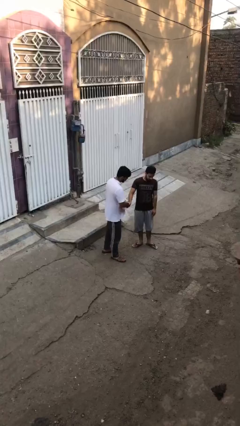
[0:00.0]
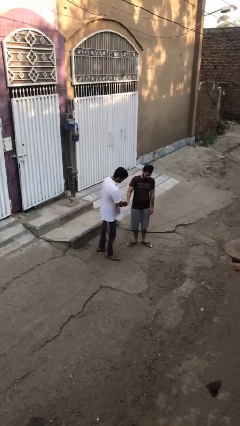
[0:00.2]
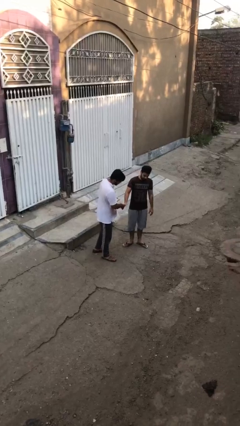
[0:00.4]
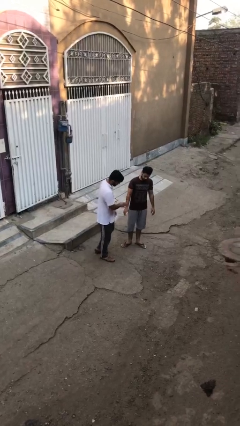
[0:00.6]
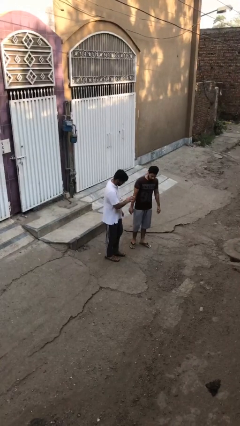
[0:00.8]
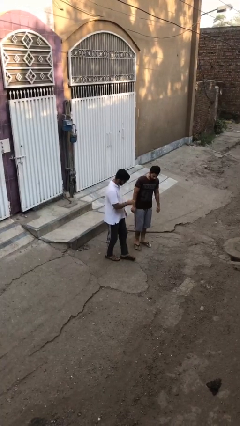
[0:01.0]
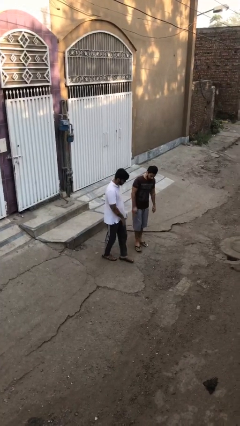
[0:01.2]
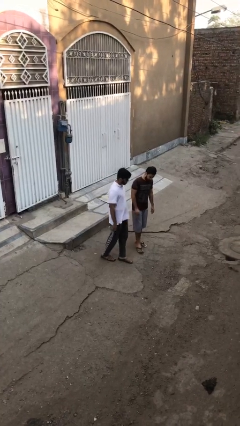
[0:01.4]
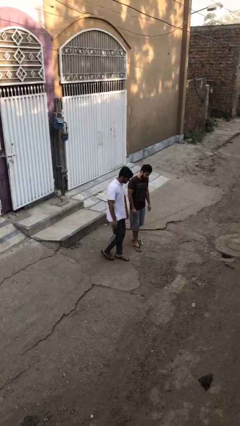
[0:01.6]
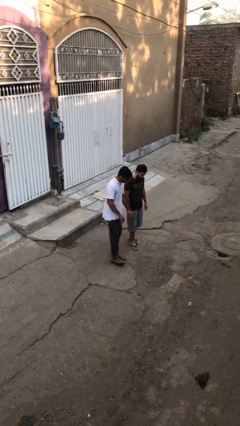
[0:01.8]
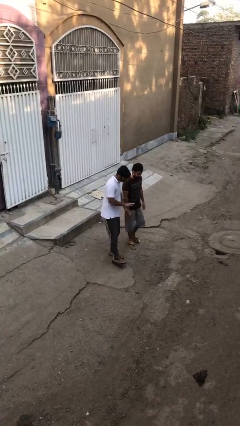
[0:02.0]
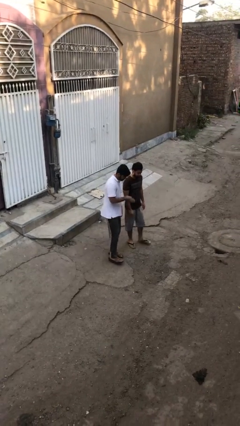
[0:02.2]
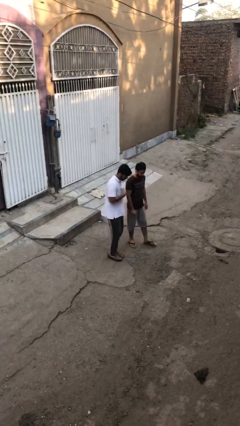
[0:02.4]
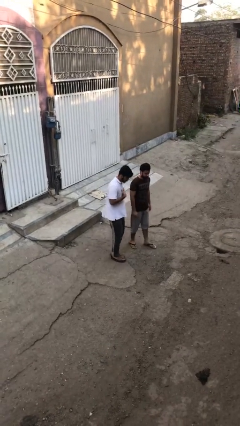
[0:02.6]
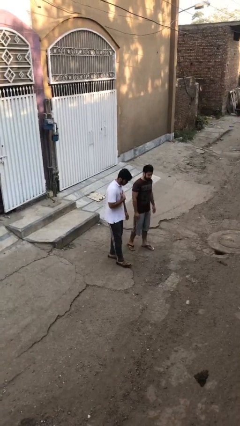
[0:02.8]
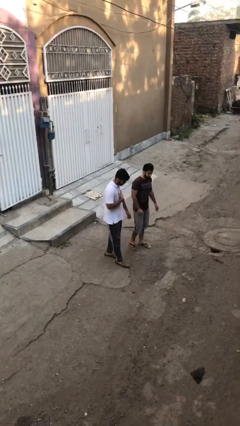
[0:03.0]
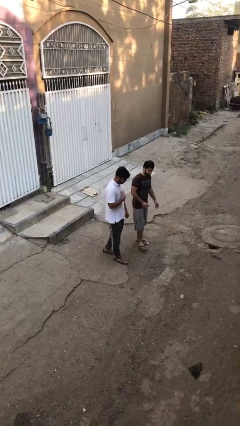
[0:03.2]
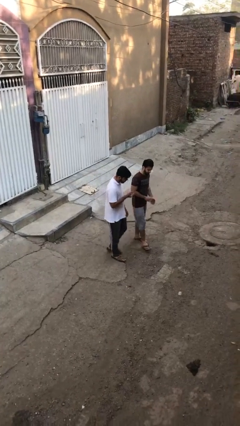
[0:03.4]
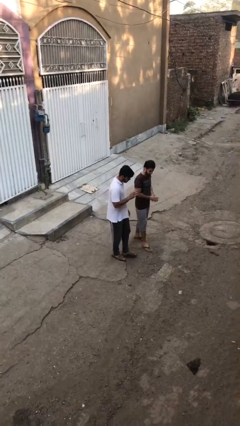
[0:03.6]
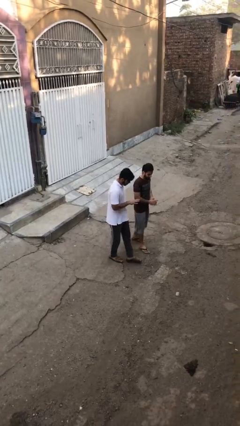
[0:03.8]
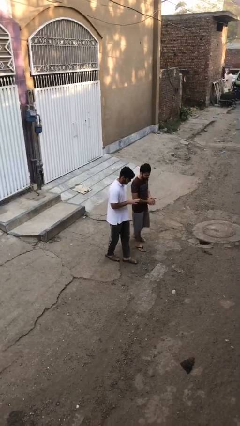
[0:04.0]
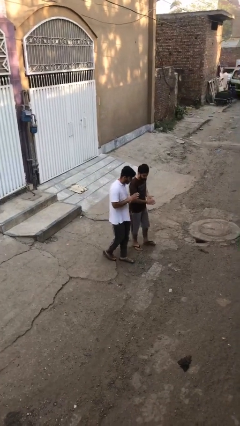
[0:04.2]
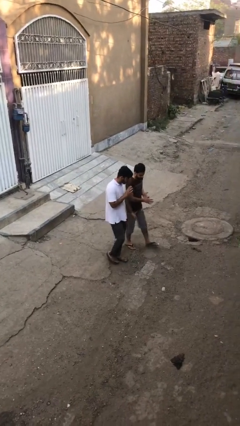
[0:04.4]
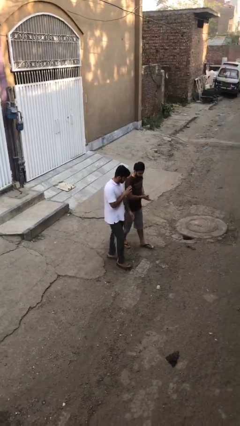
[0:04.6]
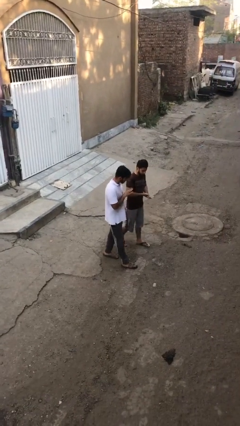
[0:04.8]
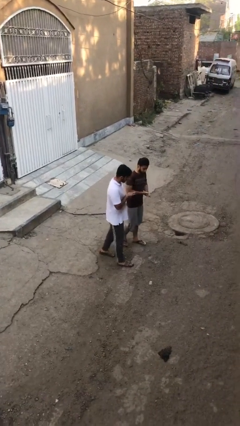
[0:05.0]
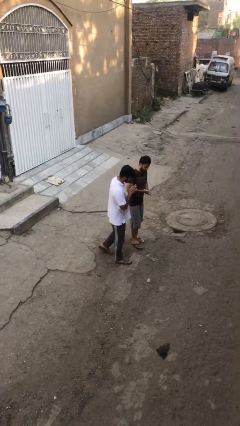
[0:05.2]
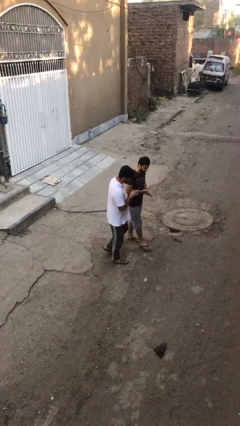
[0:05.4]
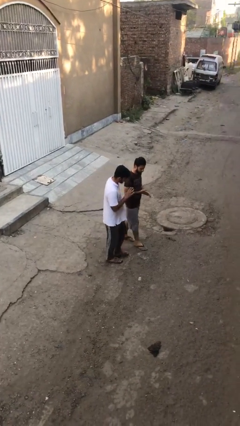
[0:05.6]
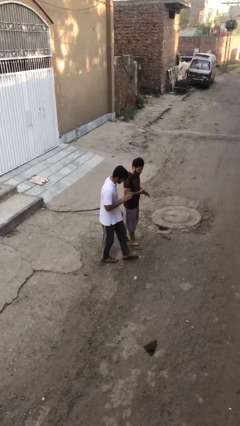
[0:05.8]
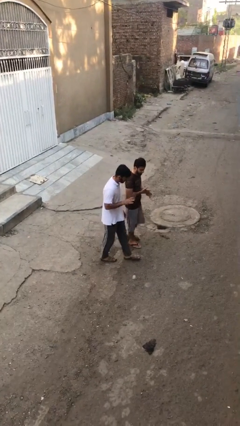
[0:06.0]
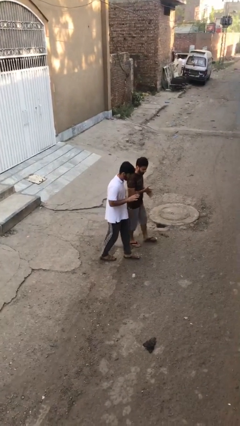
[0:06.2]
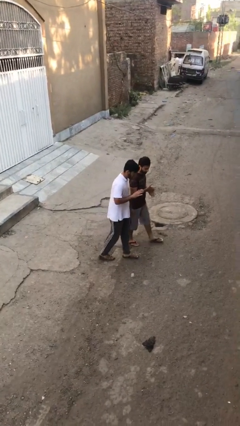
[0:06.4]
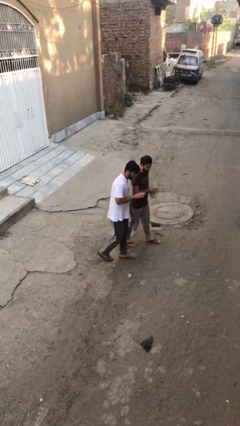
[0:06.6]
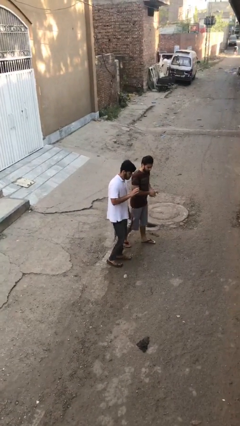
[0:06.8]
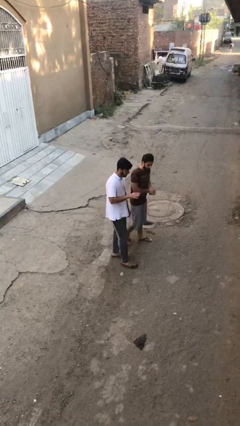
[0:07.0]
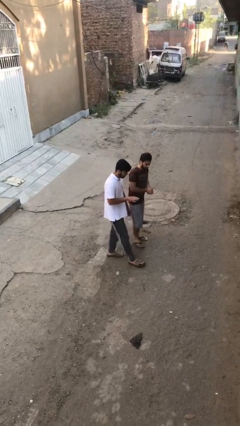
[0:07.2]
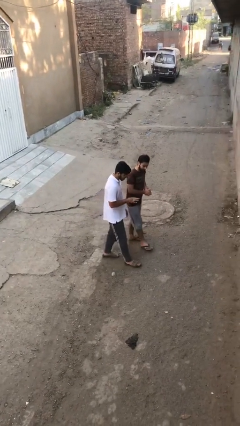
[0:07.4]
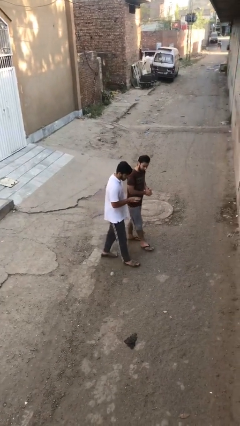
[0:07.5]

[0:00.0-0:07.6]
person talks to person

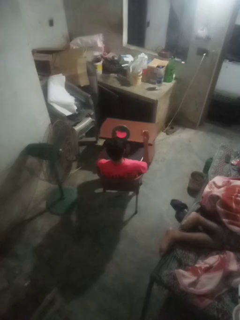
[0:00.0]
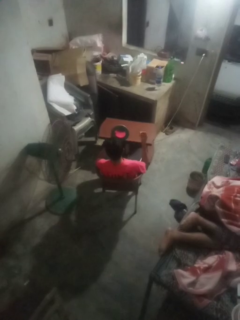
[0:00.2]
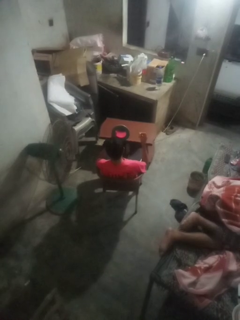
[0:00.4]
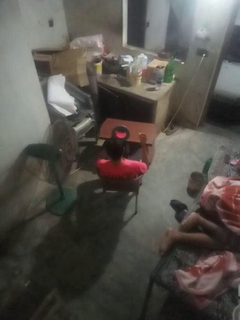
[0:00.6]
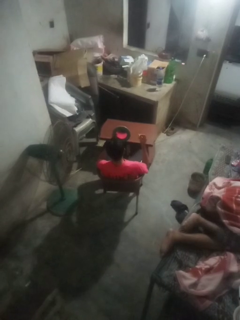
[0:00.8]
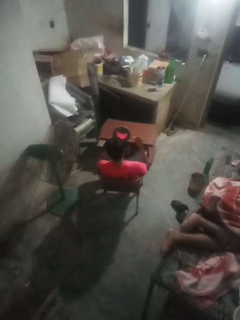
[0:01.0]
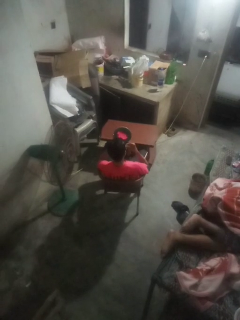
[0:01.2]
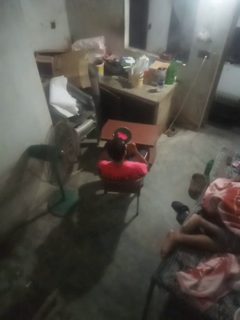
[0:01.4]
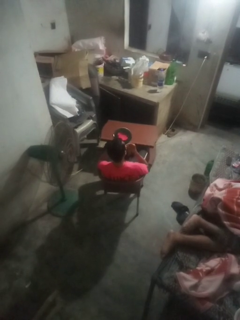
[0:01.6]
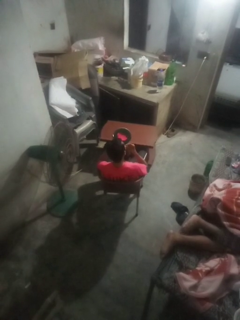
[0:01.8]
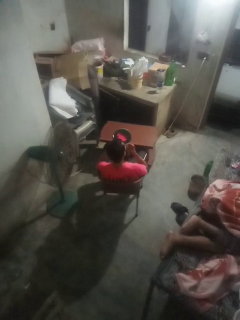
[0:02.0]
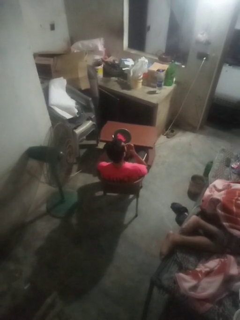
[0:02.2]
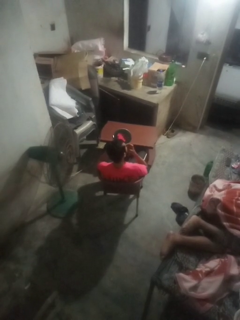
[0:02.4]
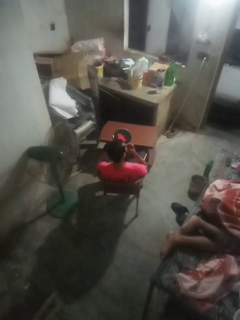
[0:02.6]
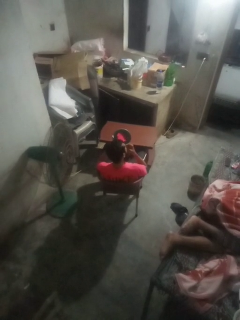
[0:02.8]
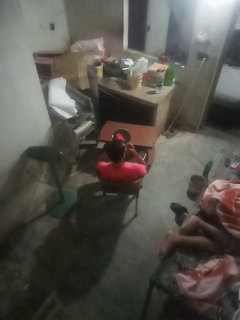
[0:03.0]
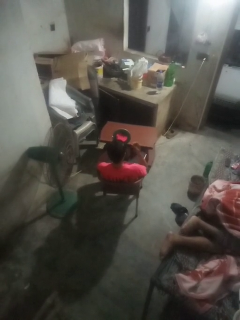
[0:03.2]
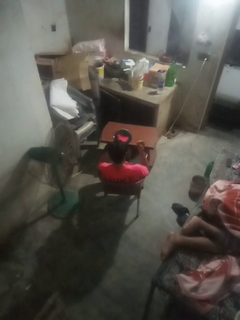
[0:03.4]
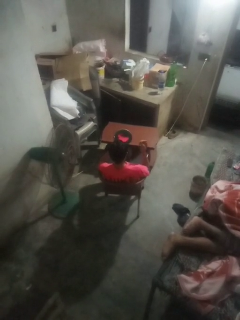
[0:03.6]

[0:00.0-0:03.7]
person applies lip makeup

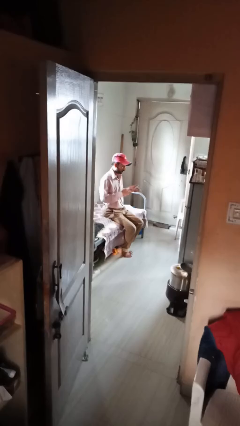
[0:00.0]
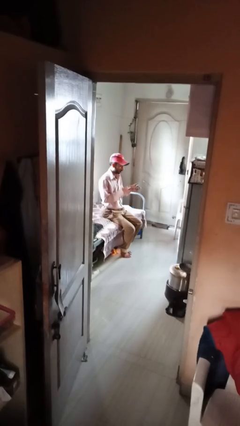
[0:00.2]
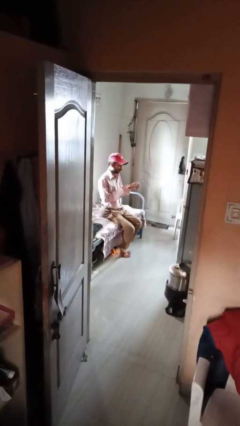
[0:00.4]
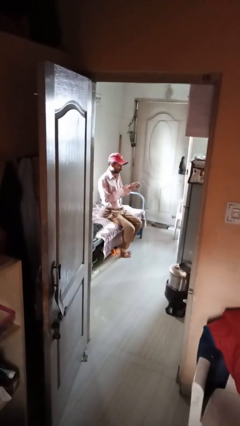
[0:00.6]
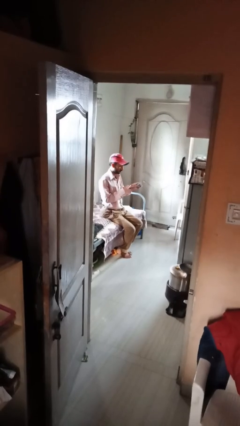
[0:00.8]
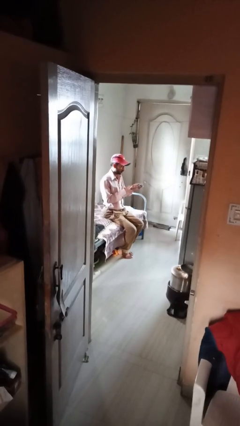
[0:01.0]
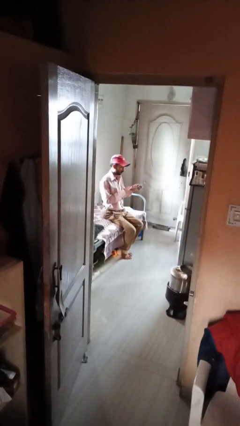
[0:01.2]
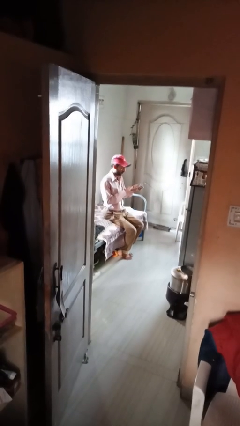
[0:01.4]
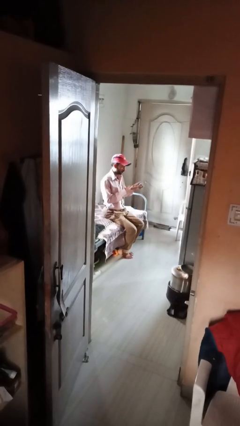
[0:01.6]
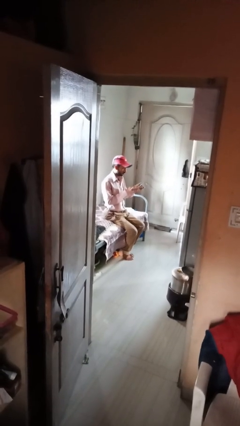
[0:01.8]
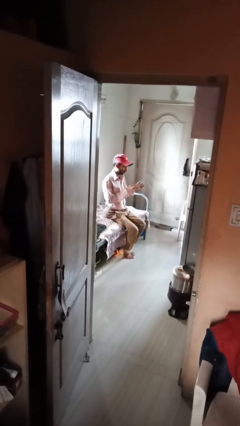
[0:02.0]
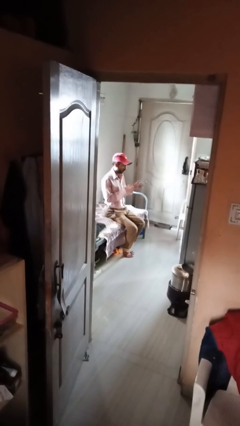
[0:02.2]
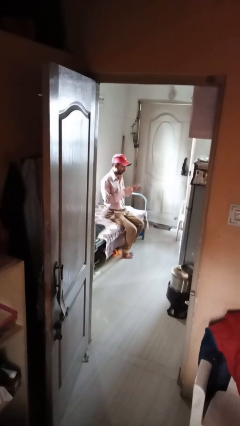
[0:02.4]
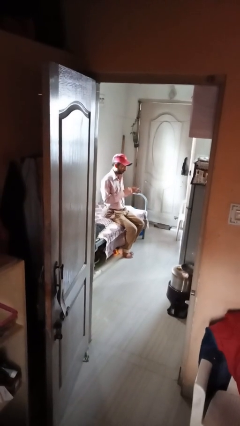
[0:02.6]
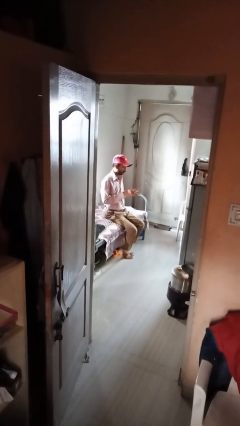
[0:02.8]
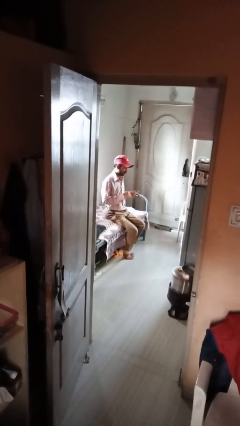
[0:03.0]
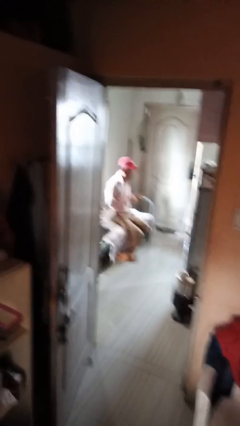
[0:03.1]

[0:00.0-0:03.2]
person clips fingernails

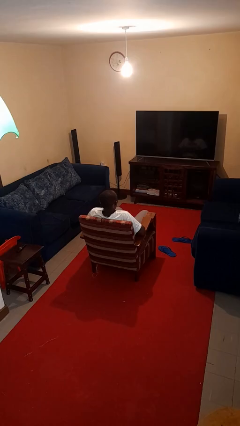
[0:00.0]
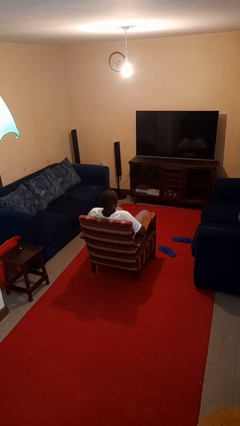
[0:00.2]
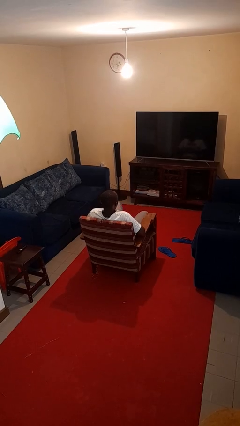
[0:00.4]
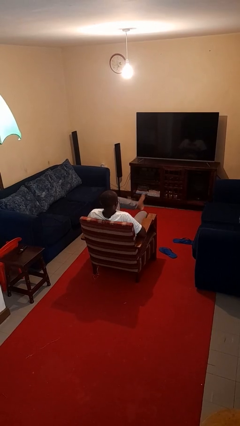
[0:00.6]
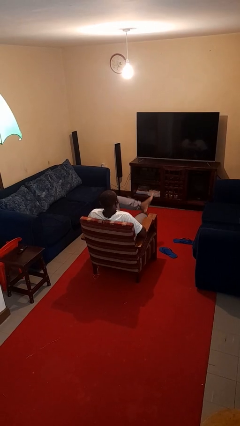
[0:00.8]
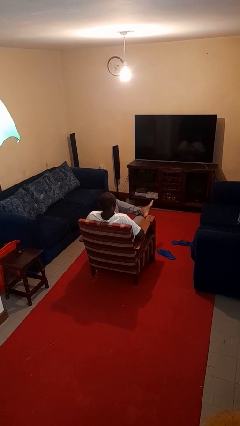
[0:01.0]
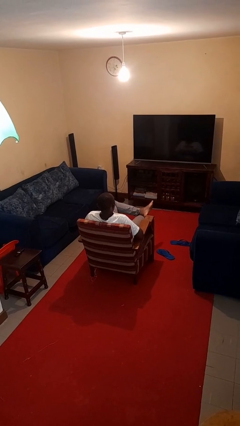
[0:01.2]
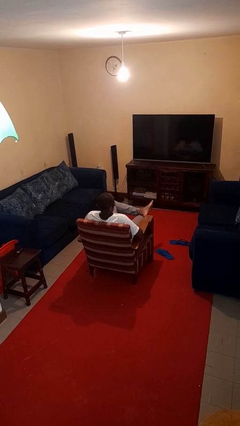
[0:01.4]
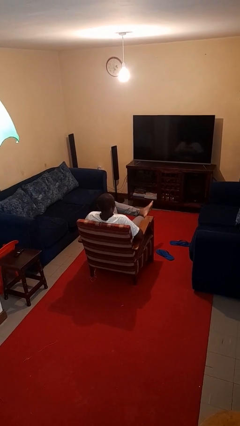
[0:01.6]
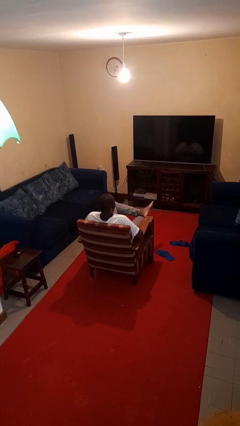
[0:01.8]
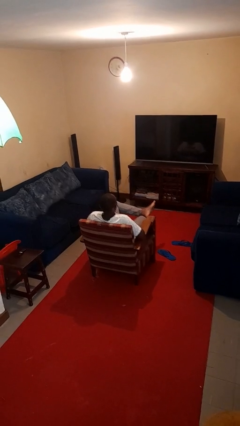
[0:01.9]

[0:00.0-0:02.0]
person crosses legs

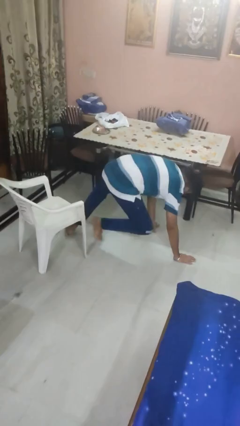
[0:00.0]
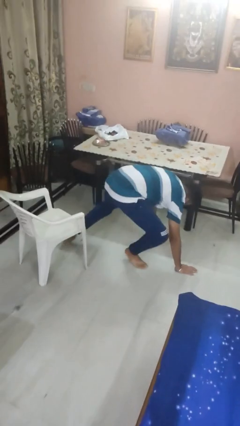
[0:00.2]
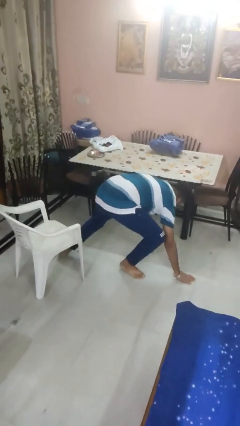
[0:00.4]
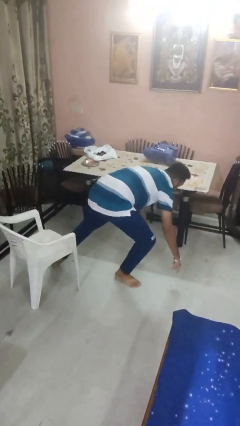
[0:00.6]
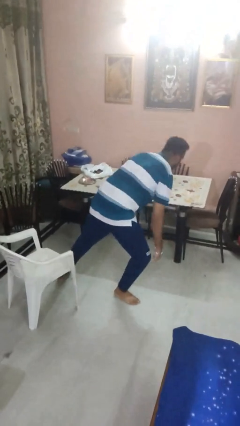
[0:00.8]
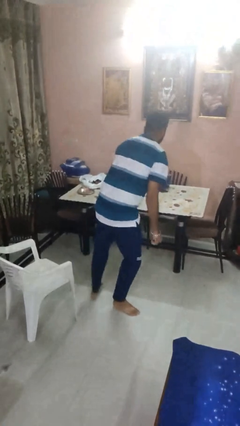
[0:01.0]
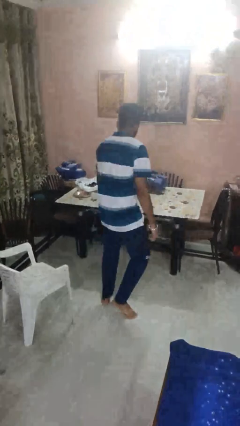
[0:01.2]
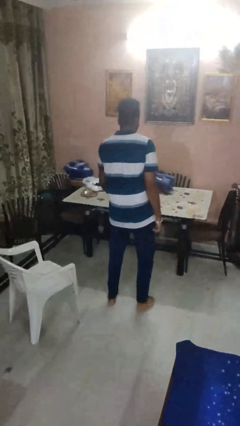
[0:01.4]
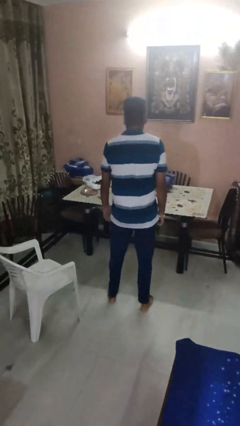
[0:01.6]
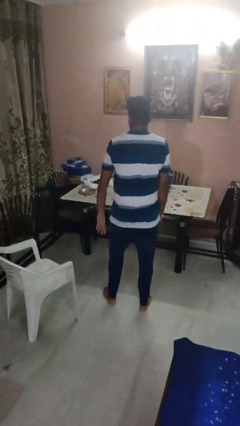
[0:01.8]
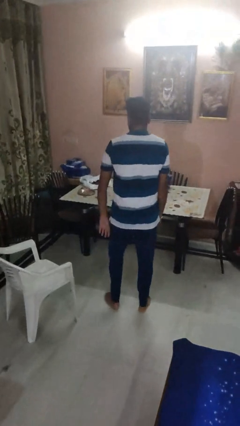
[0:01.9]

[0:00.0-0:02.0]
person stands up from floor

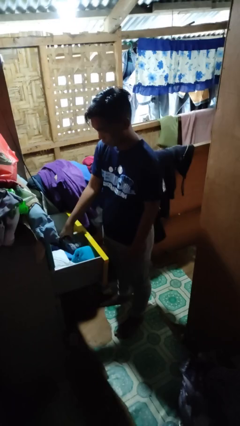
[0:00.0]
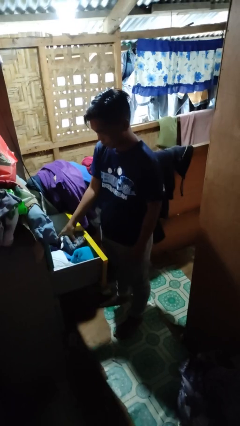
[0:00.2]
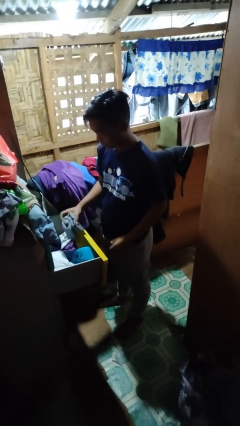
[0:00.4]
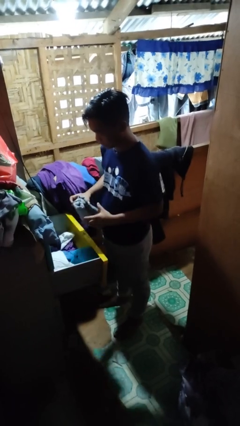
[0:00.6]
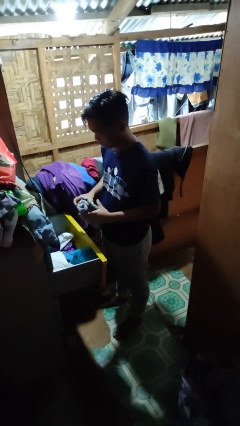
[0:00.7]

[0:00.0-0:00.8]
person takes clothes from dresser
